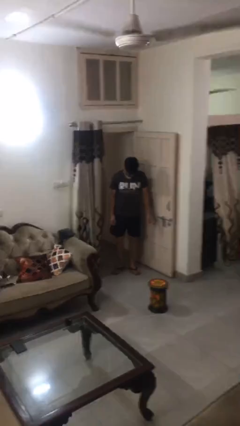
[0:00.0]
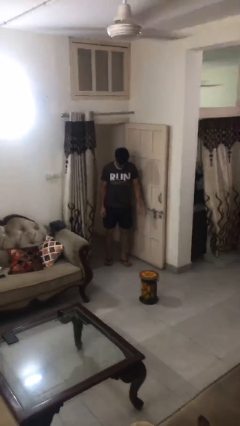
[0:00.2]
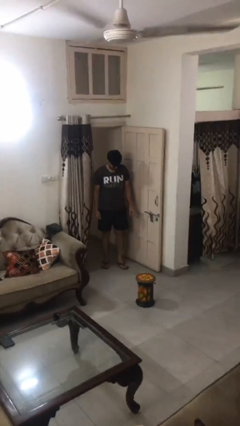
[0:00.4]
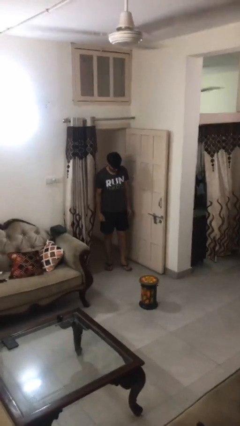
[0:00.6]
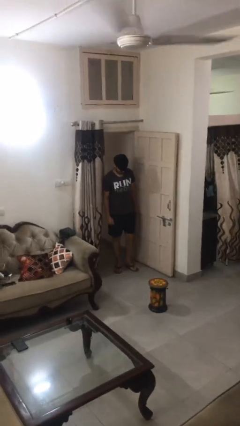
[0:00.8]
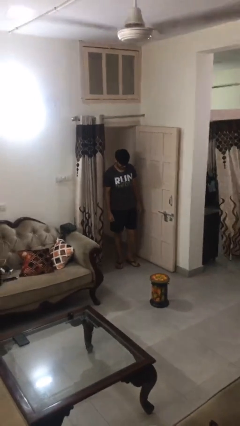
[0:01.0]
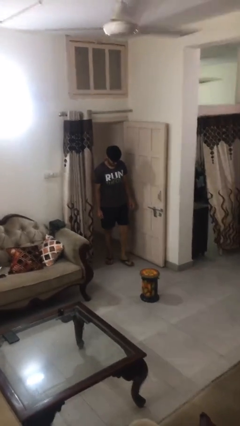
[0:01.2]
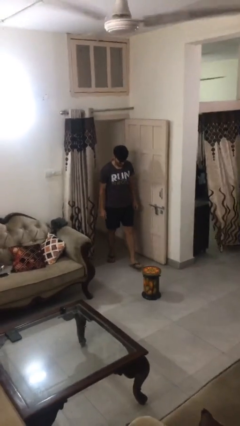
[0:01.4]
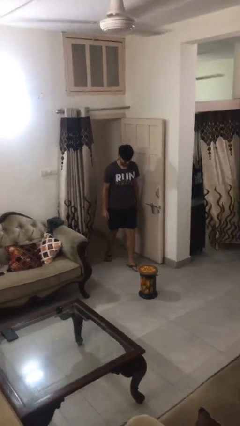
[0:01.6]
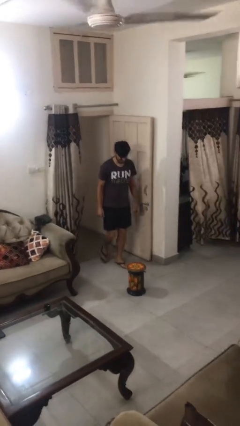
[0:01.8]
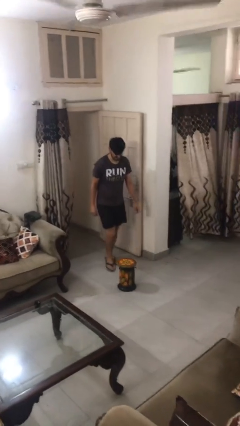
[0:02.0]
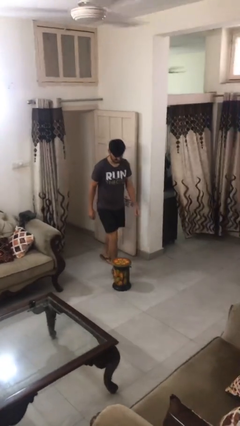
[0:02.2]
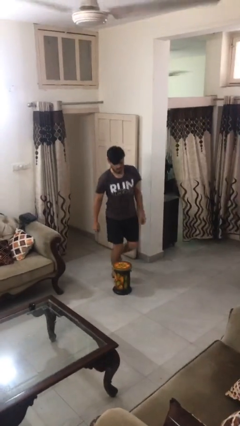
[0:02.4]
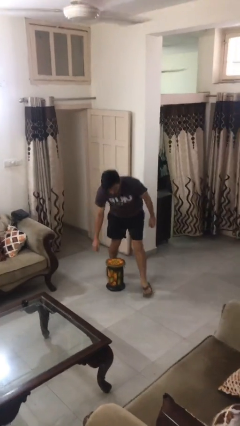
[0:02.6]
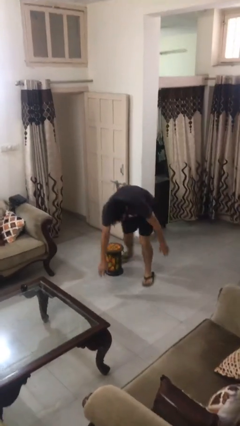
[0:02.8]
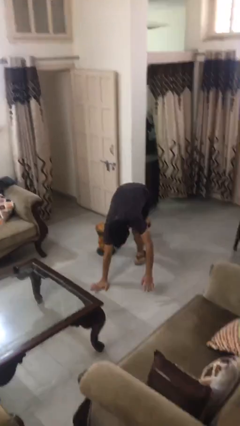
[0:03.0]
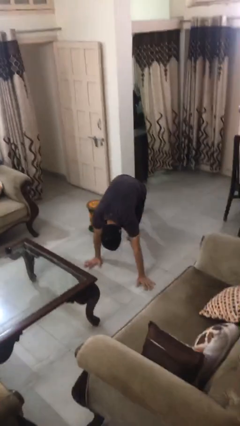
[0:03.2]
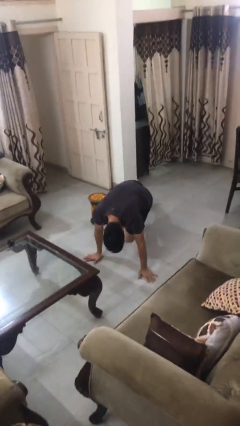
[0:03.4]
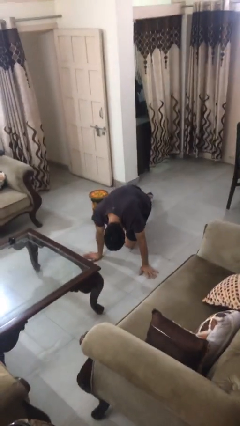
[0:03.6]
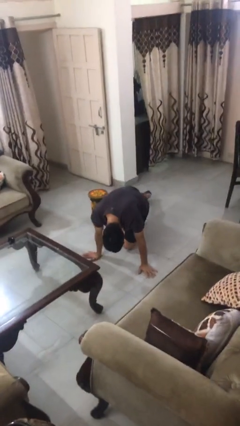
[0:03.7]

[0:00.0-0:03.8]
person trips on object on floor

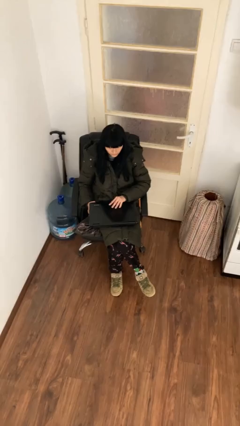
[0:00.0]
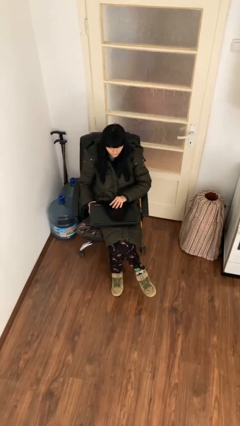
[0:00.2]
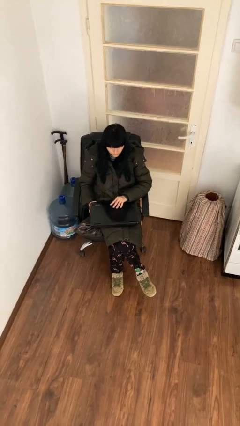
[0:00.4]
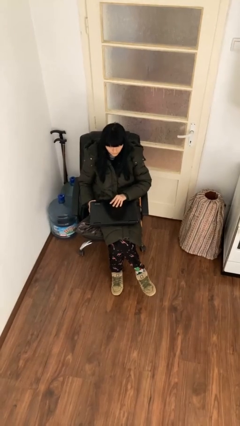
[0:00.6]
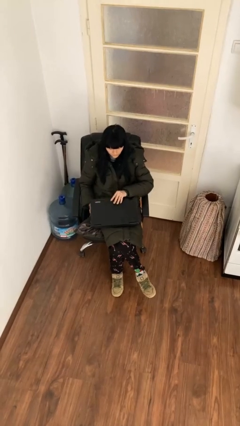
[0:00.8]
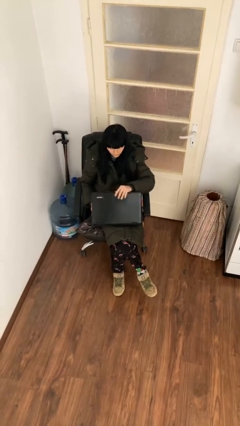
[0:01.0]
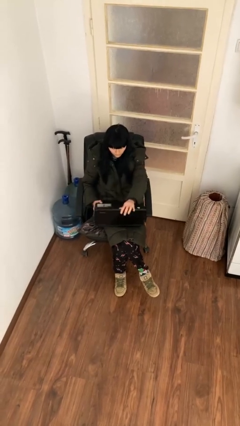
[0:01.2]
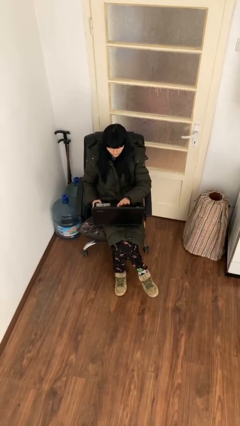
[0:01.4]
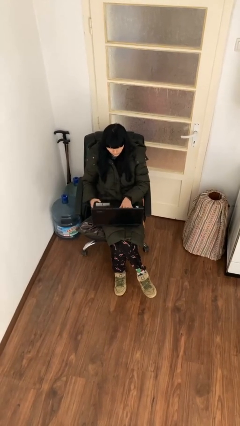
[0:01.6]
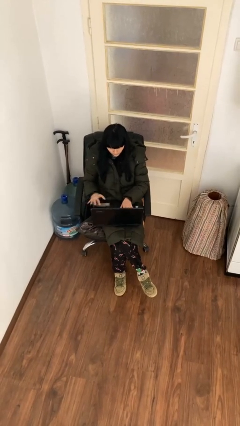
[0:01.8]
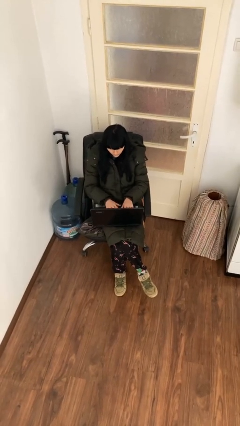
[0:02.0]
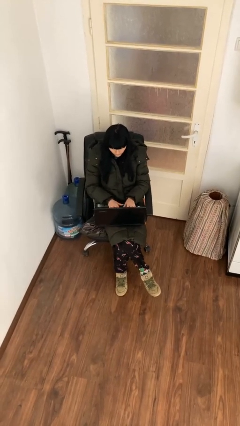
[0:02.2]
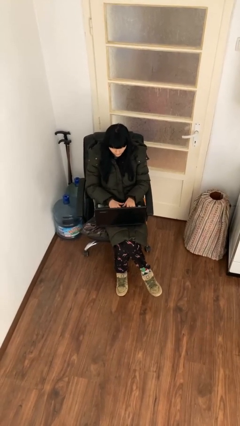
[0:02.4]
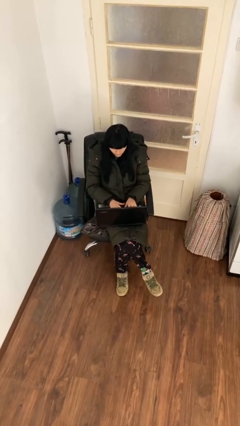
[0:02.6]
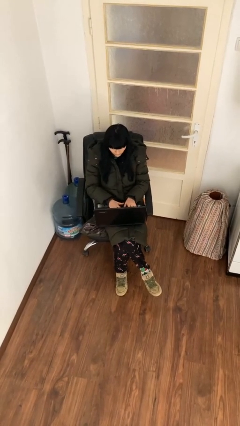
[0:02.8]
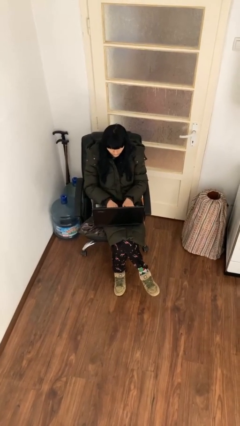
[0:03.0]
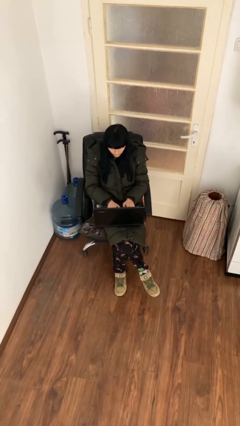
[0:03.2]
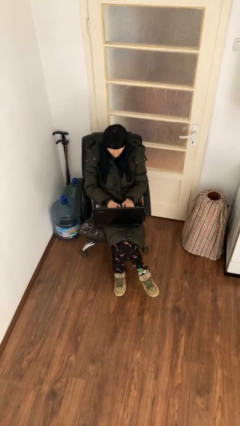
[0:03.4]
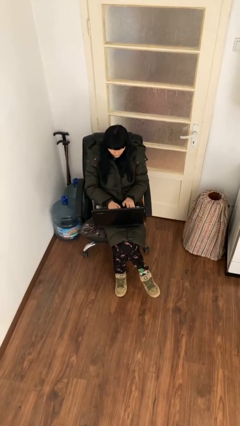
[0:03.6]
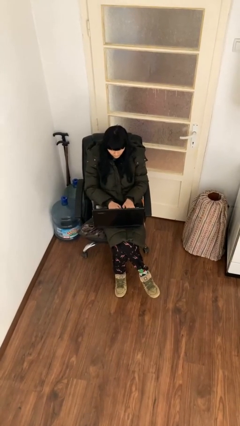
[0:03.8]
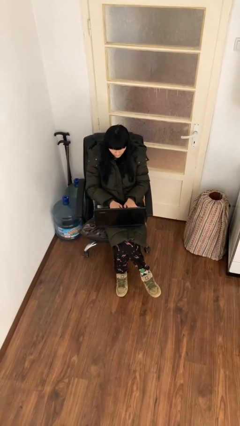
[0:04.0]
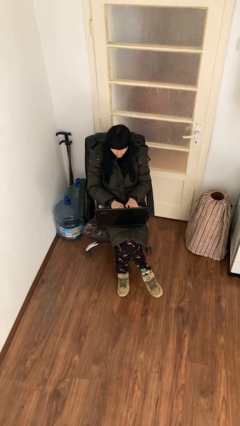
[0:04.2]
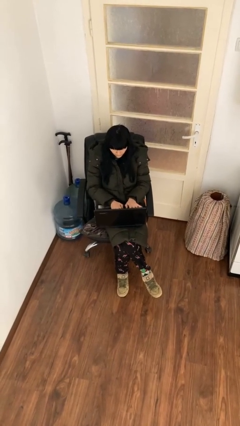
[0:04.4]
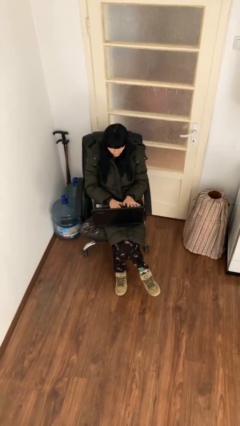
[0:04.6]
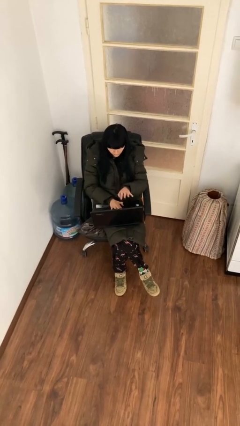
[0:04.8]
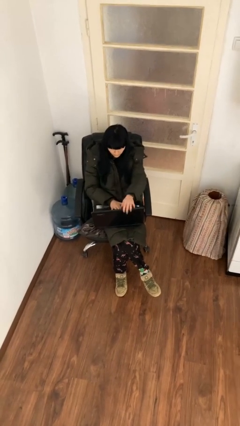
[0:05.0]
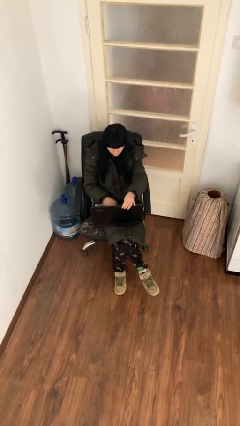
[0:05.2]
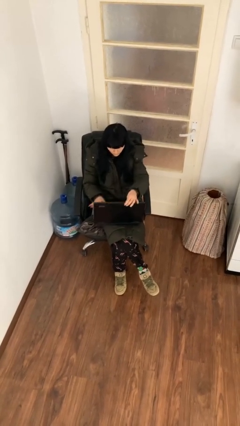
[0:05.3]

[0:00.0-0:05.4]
person interacts with laptop

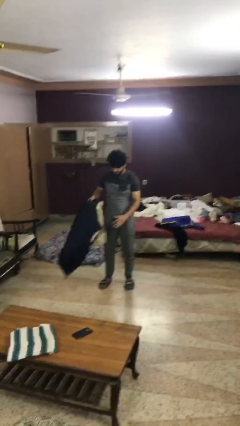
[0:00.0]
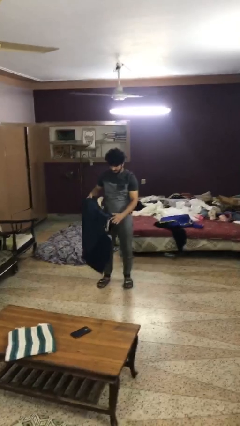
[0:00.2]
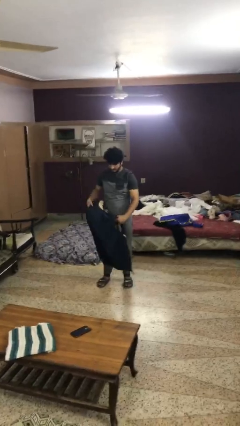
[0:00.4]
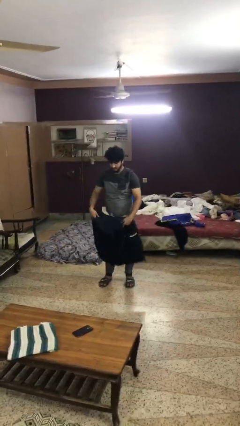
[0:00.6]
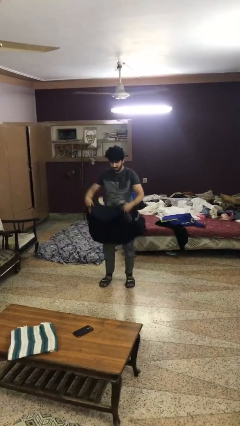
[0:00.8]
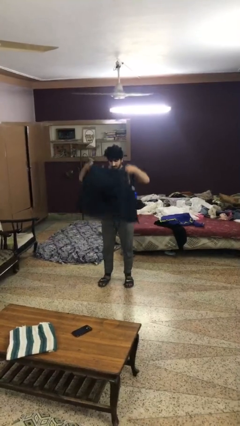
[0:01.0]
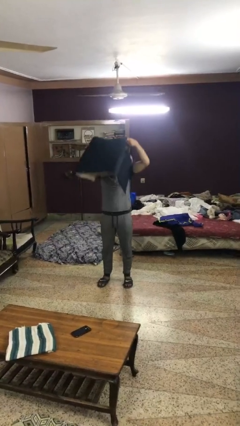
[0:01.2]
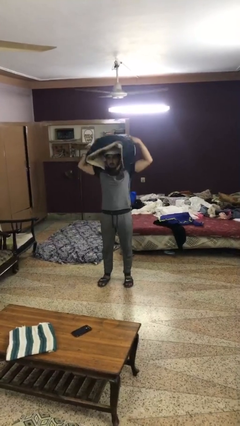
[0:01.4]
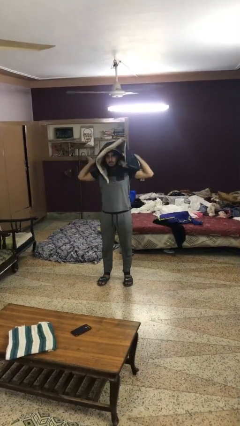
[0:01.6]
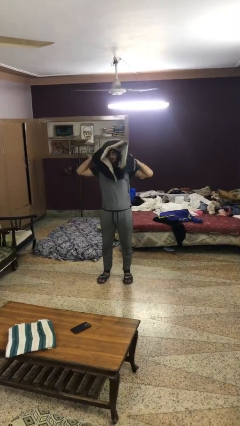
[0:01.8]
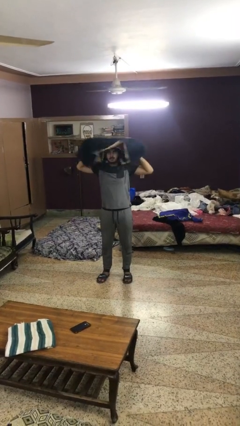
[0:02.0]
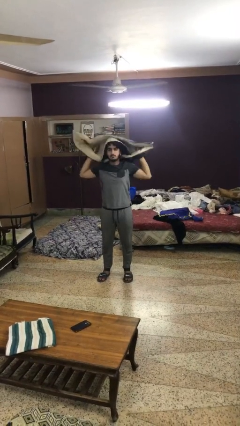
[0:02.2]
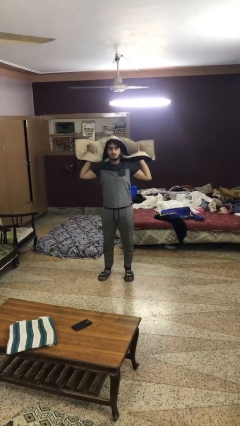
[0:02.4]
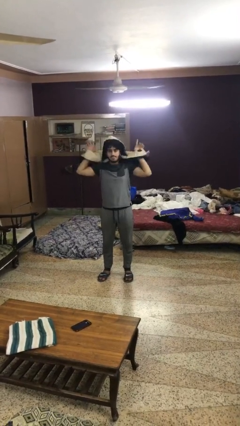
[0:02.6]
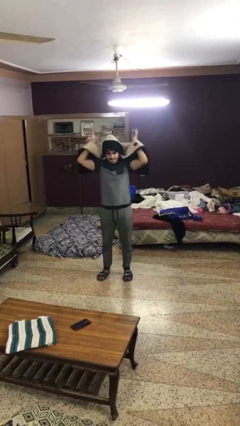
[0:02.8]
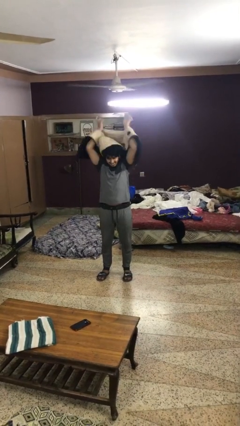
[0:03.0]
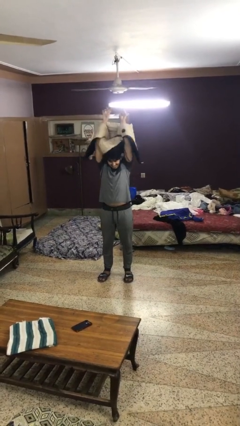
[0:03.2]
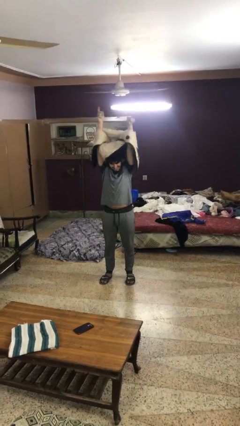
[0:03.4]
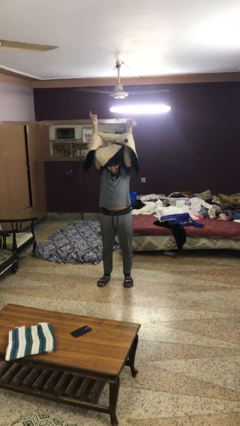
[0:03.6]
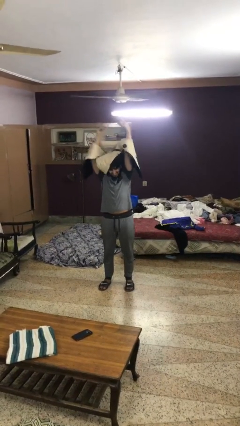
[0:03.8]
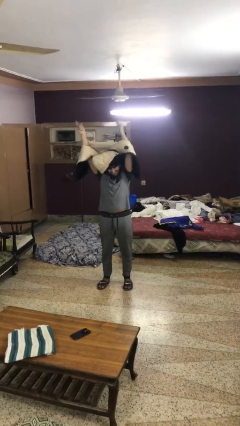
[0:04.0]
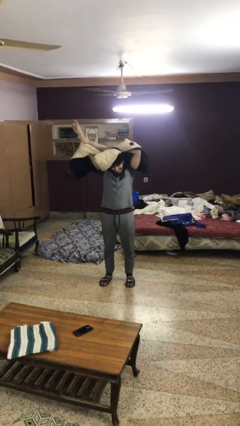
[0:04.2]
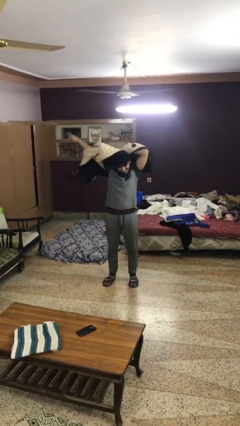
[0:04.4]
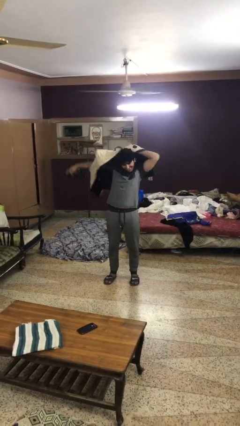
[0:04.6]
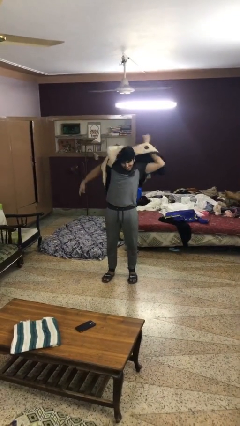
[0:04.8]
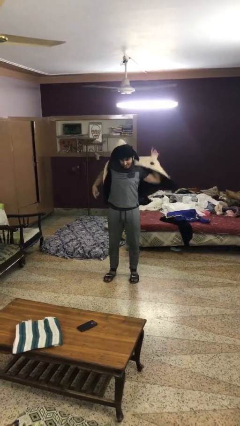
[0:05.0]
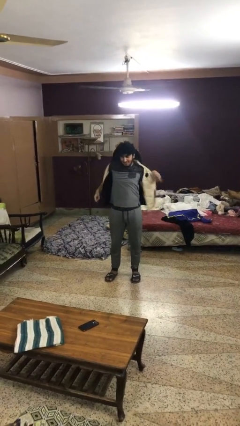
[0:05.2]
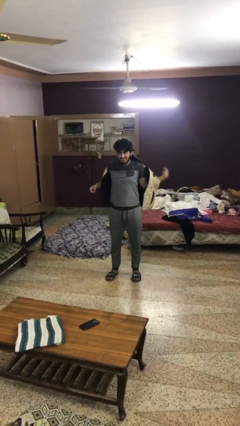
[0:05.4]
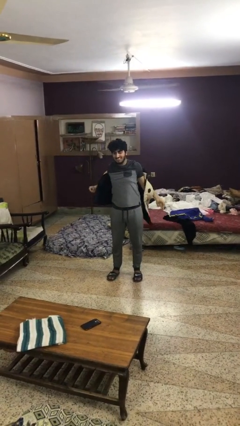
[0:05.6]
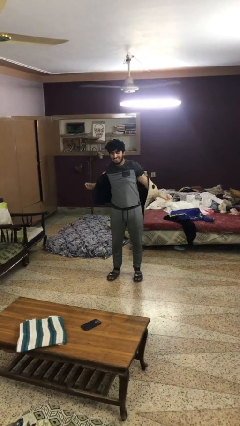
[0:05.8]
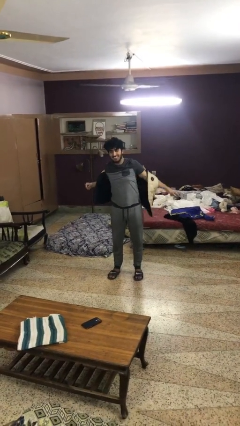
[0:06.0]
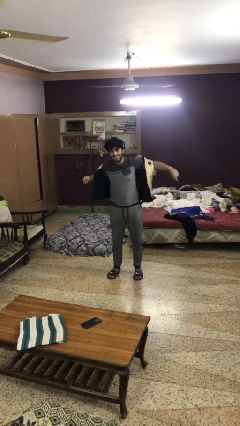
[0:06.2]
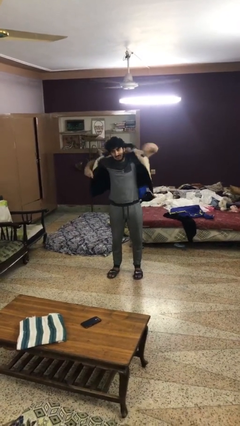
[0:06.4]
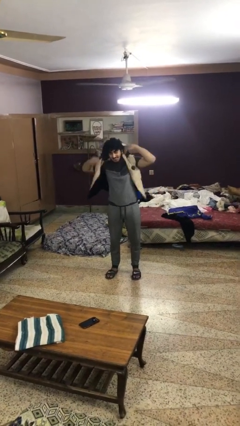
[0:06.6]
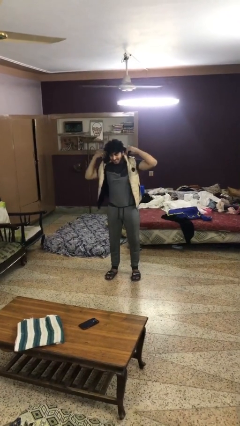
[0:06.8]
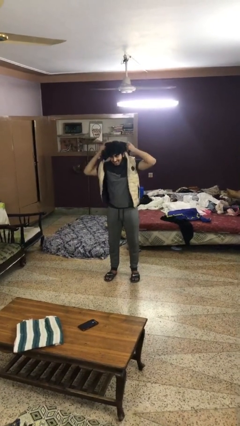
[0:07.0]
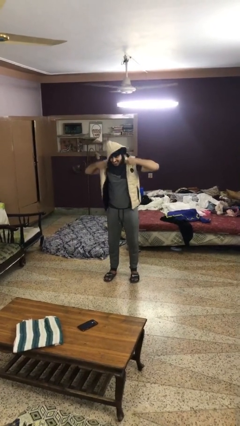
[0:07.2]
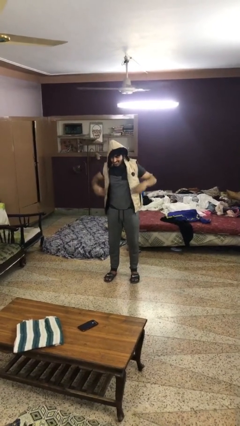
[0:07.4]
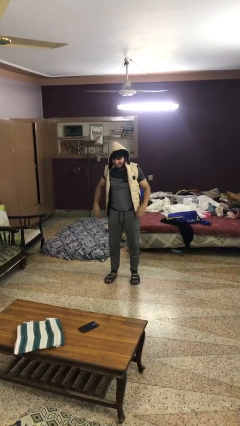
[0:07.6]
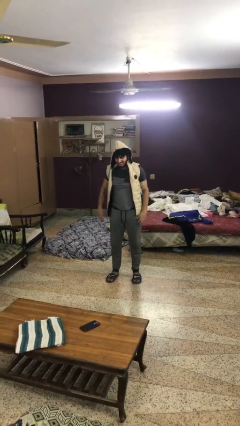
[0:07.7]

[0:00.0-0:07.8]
person puts on hoodie

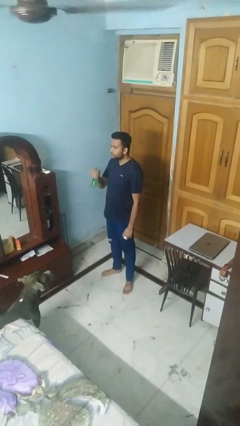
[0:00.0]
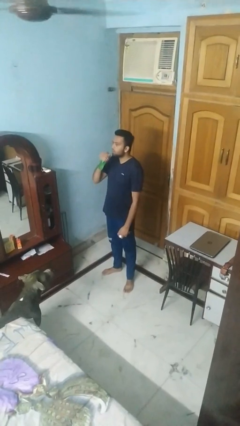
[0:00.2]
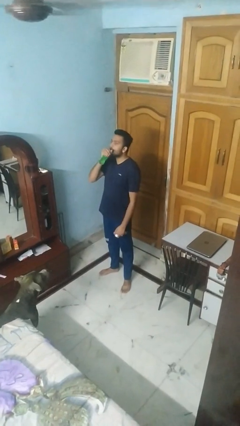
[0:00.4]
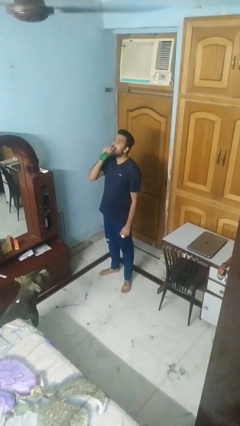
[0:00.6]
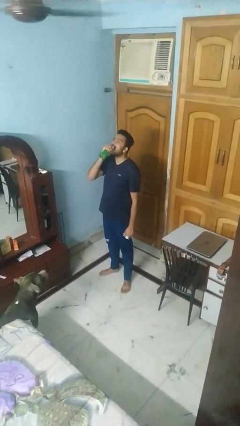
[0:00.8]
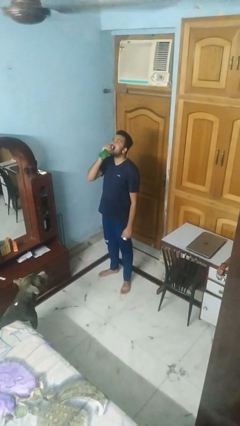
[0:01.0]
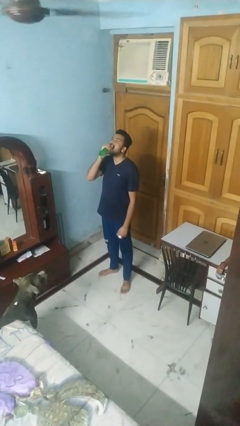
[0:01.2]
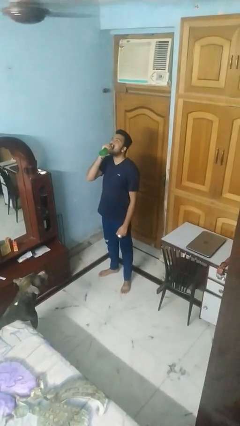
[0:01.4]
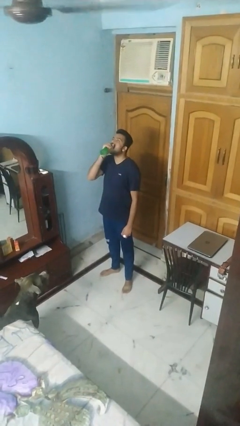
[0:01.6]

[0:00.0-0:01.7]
person drinks from bottle
